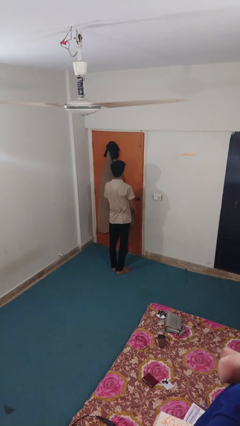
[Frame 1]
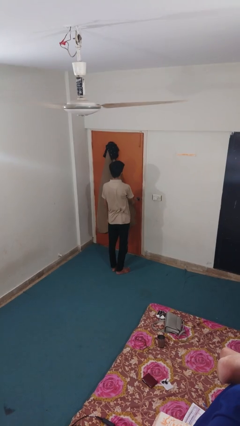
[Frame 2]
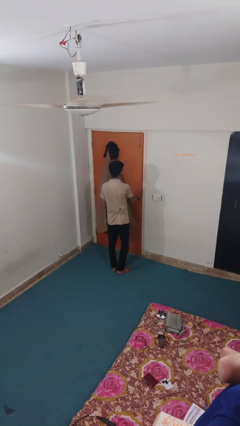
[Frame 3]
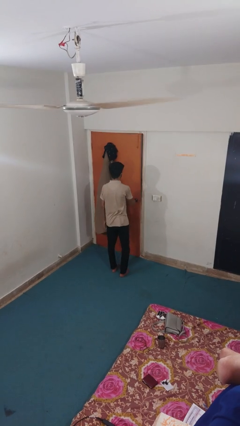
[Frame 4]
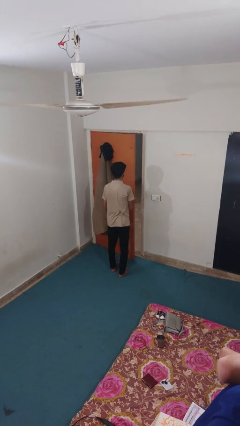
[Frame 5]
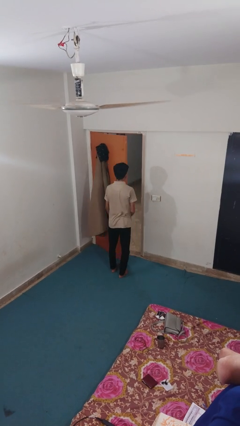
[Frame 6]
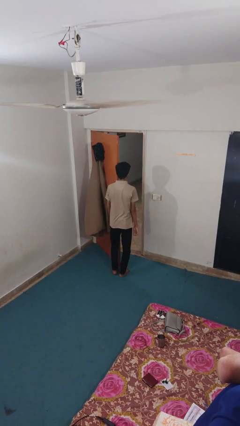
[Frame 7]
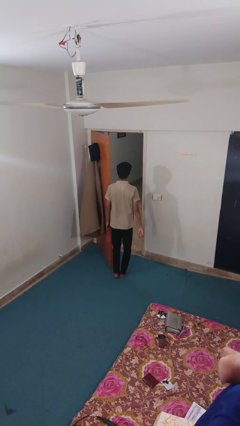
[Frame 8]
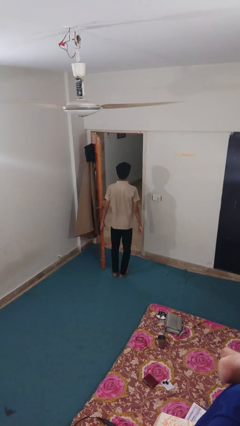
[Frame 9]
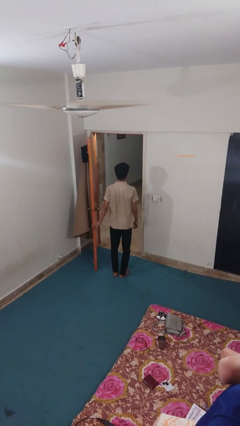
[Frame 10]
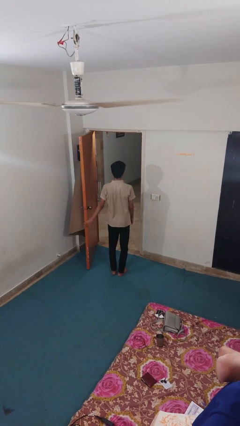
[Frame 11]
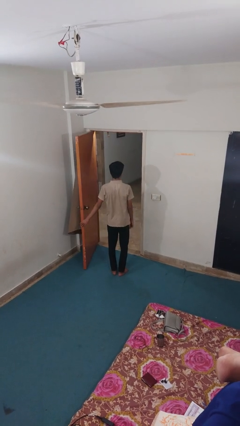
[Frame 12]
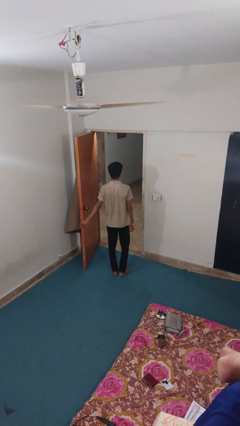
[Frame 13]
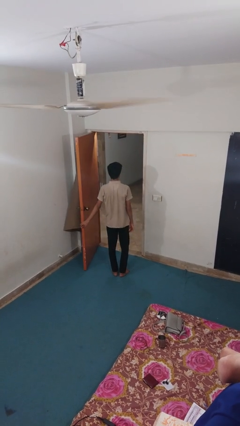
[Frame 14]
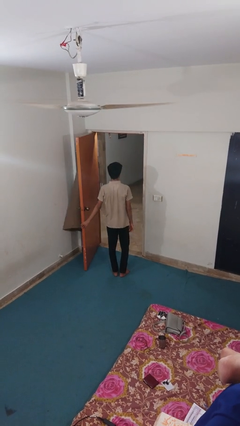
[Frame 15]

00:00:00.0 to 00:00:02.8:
person opens facility door

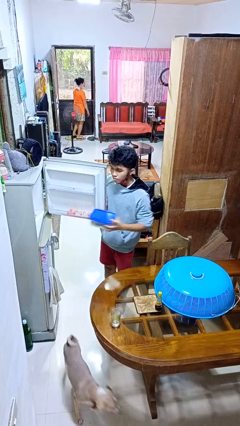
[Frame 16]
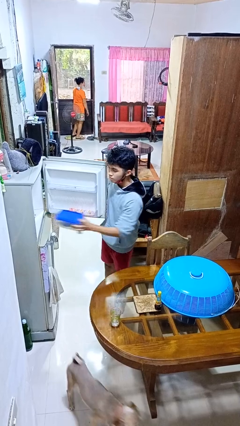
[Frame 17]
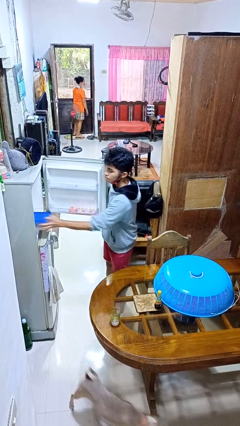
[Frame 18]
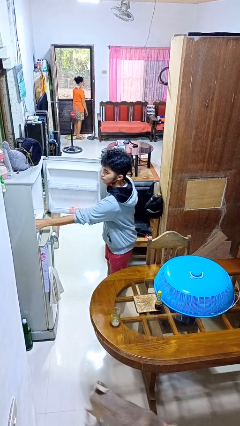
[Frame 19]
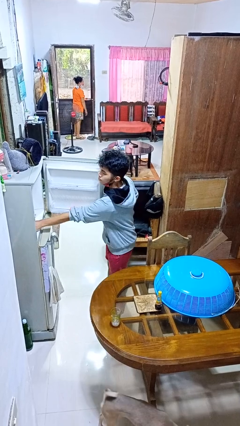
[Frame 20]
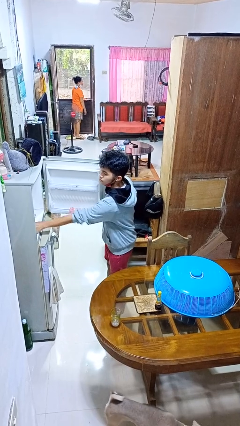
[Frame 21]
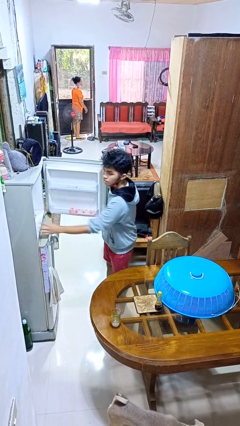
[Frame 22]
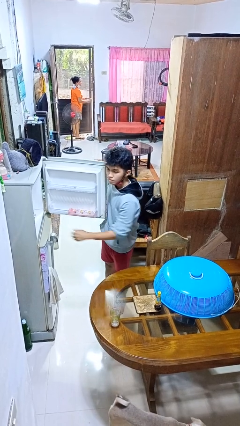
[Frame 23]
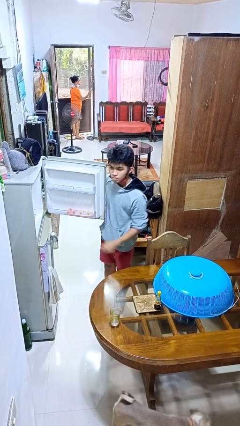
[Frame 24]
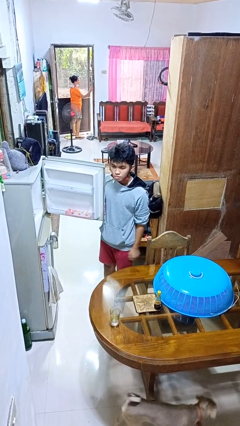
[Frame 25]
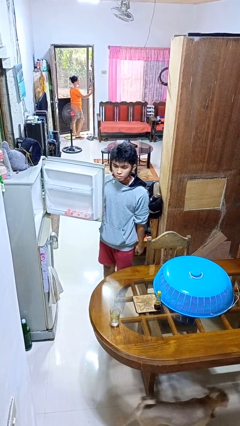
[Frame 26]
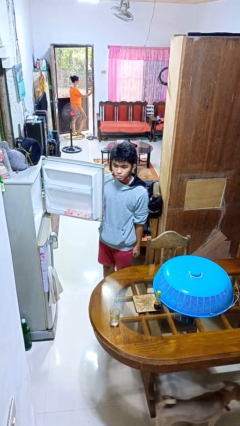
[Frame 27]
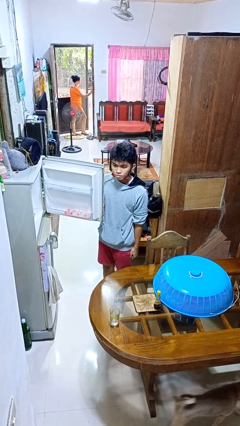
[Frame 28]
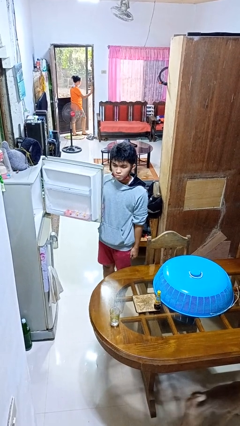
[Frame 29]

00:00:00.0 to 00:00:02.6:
person puts object into refrigerator

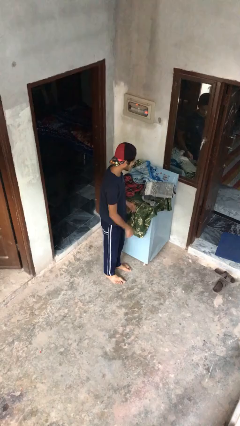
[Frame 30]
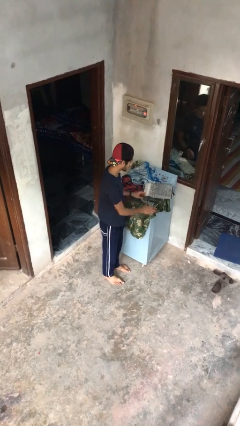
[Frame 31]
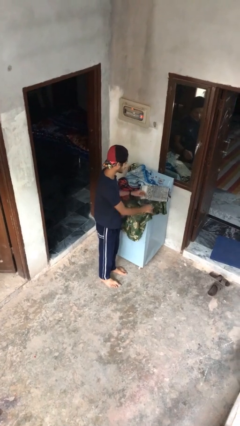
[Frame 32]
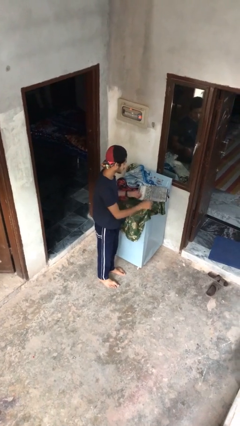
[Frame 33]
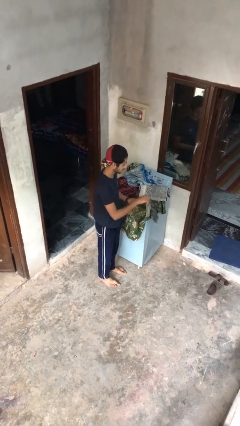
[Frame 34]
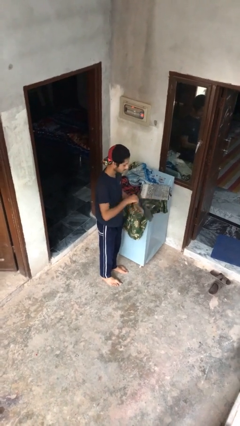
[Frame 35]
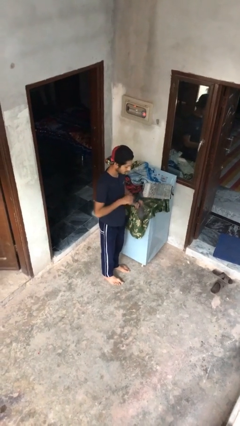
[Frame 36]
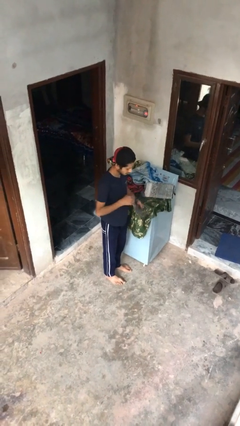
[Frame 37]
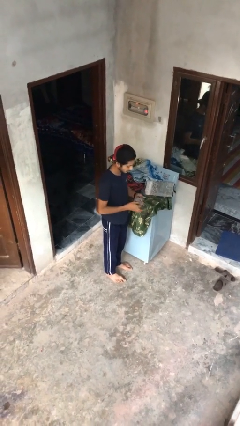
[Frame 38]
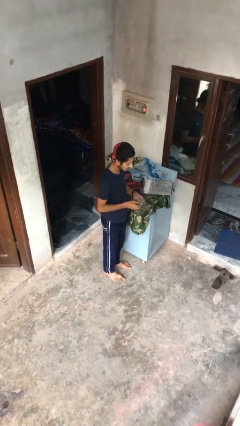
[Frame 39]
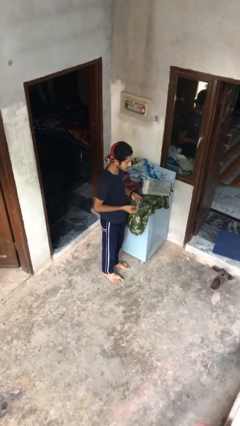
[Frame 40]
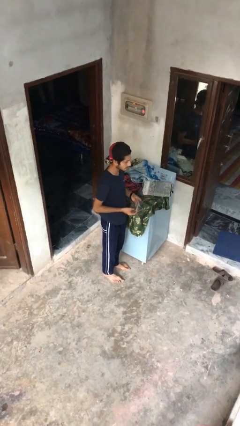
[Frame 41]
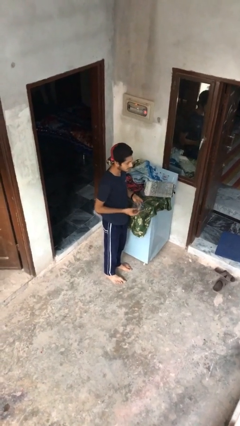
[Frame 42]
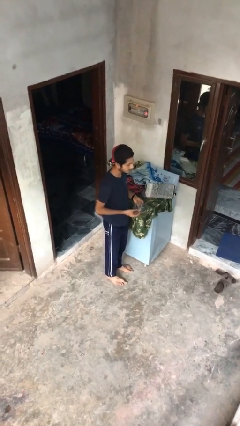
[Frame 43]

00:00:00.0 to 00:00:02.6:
person folds socks

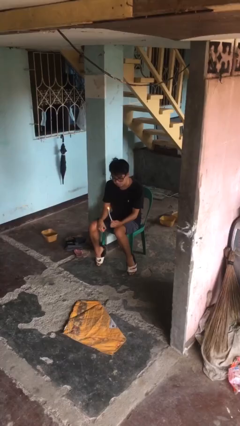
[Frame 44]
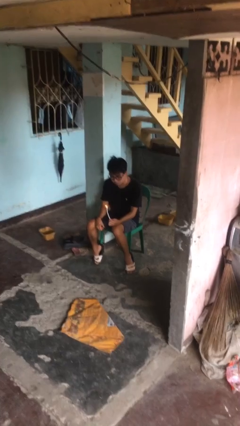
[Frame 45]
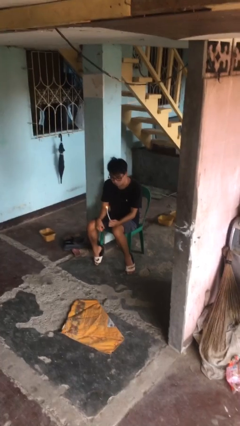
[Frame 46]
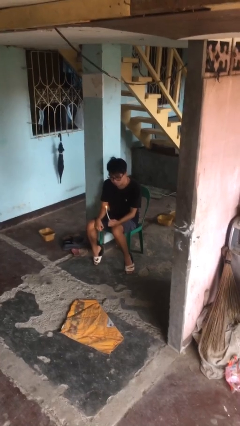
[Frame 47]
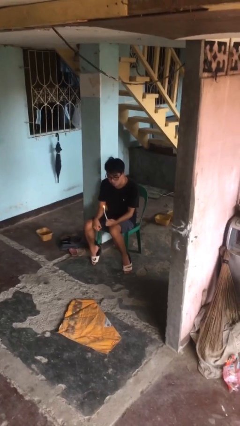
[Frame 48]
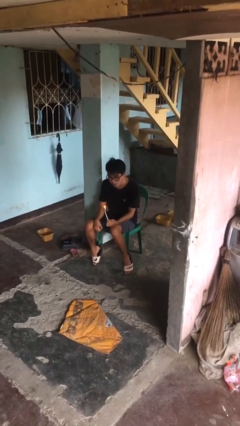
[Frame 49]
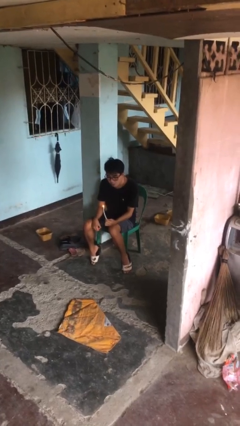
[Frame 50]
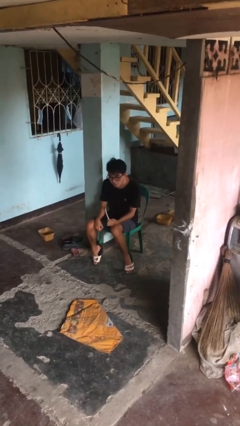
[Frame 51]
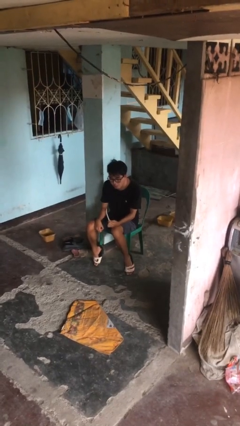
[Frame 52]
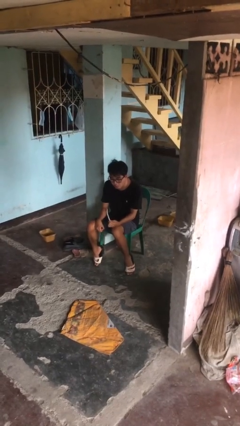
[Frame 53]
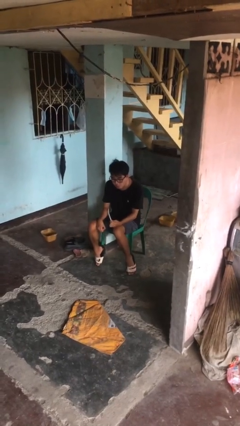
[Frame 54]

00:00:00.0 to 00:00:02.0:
person extinguishes candle

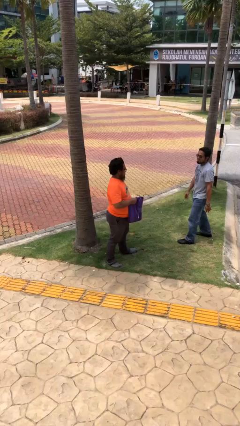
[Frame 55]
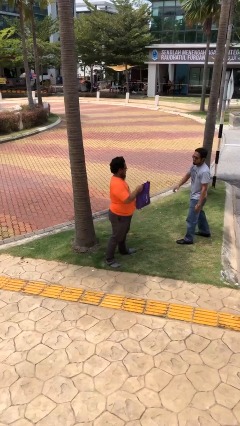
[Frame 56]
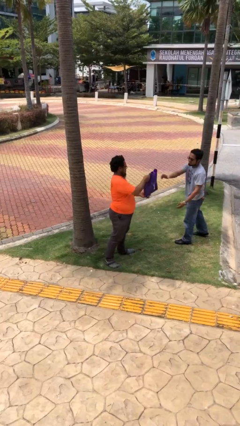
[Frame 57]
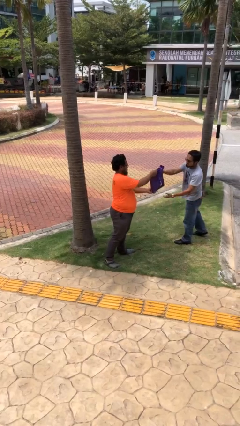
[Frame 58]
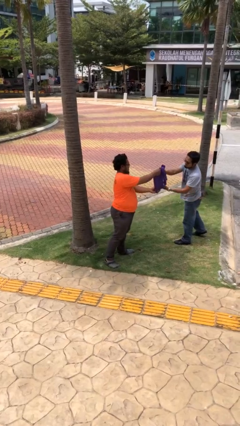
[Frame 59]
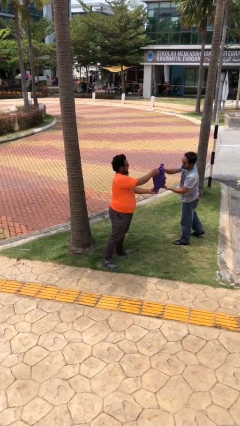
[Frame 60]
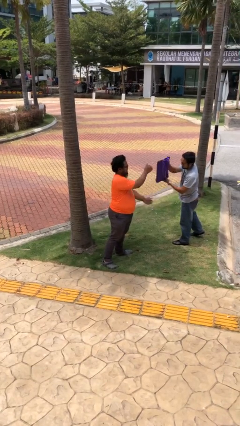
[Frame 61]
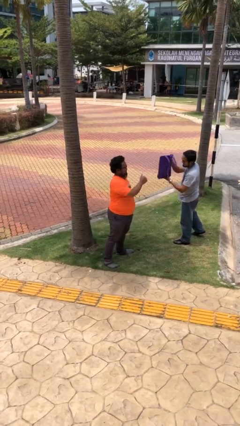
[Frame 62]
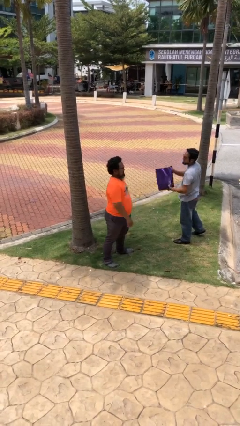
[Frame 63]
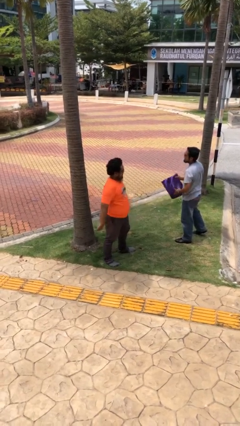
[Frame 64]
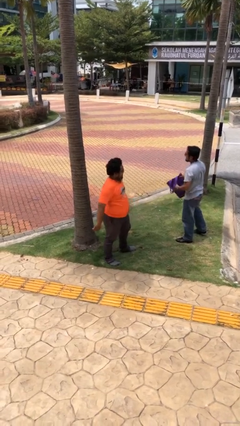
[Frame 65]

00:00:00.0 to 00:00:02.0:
person transfers object to person

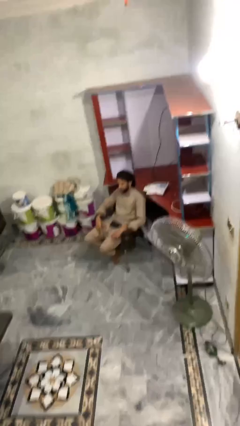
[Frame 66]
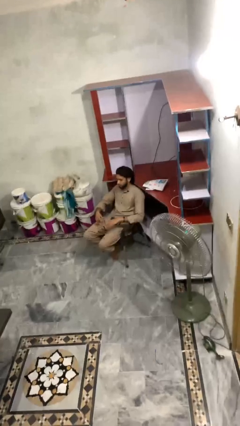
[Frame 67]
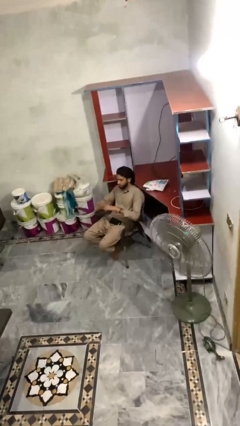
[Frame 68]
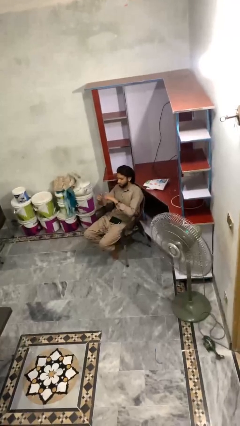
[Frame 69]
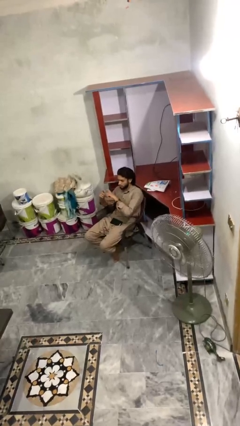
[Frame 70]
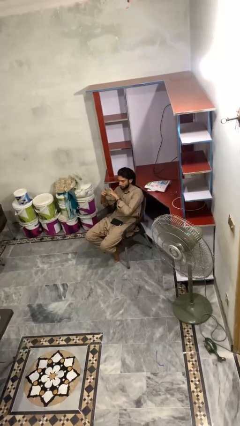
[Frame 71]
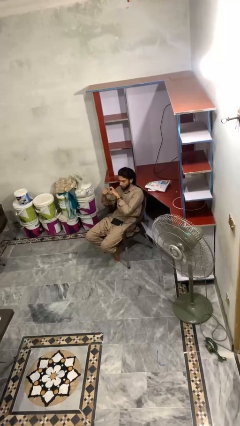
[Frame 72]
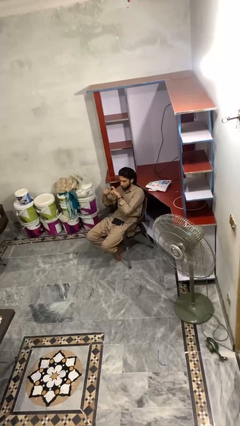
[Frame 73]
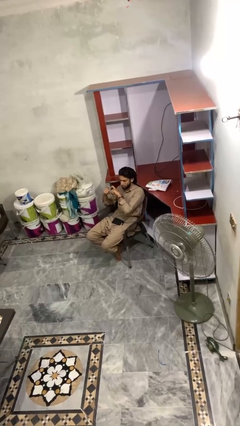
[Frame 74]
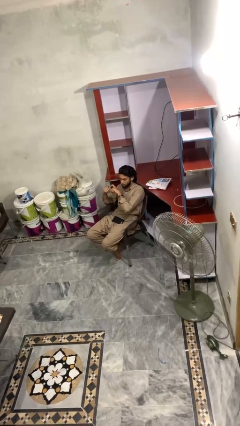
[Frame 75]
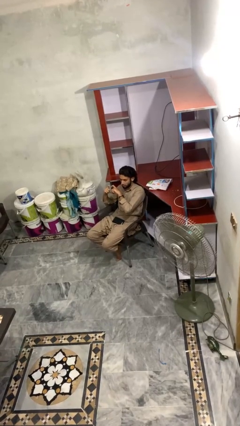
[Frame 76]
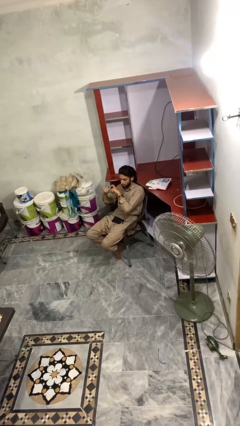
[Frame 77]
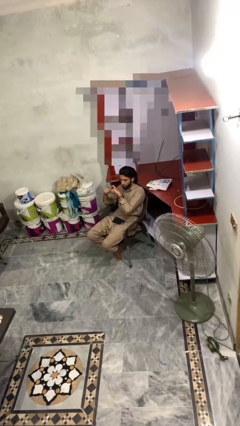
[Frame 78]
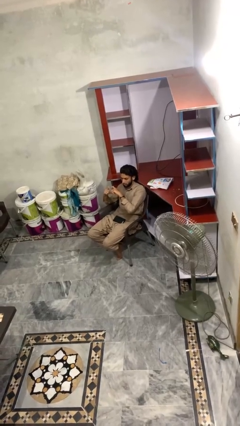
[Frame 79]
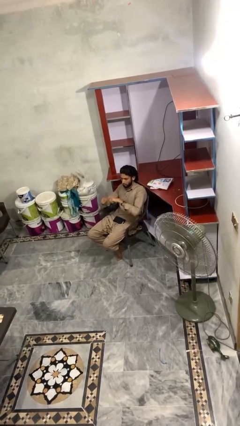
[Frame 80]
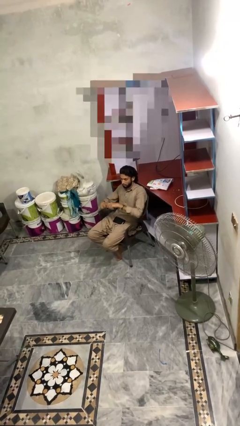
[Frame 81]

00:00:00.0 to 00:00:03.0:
person gestures heart

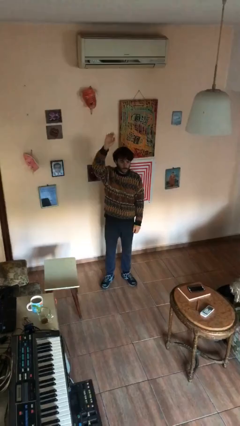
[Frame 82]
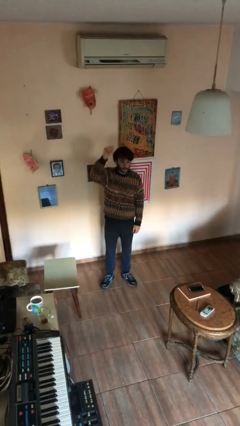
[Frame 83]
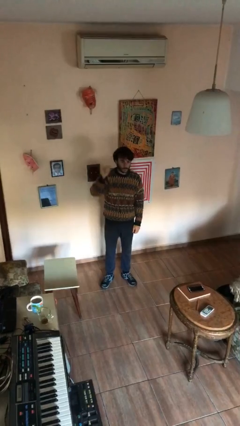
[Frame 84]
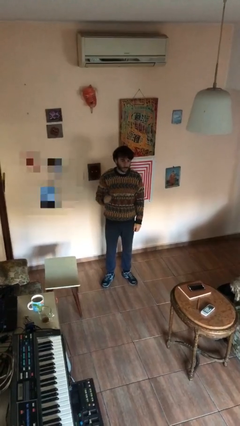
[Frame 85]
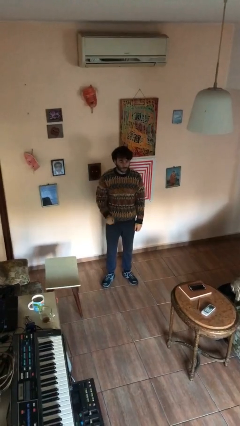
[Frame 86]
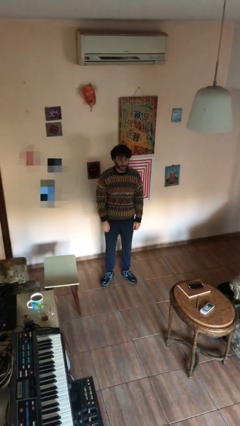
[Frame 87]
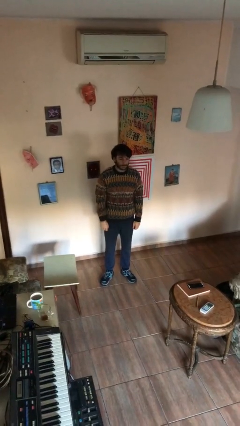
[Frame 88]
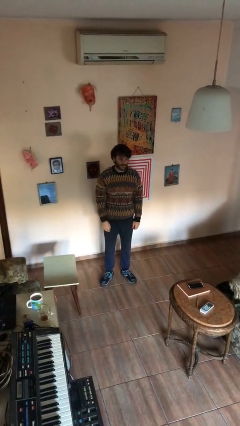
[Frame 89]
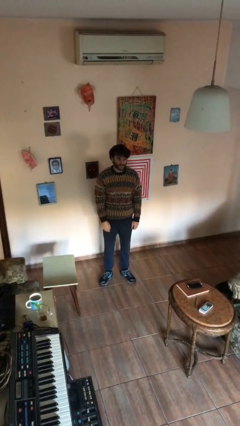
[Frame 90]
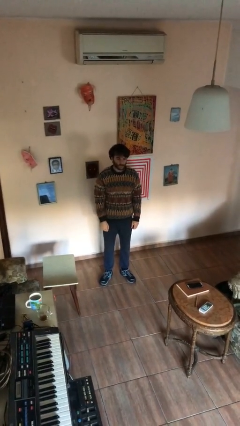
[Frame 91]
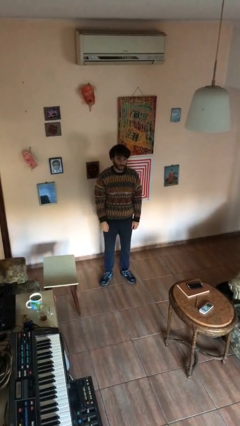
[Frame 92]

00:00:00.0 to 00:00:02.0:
person gestures lower hand
